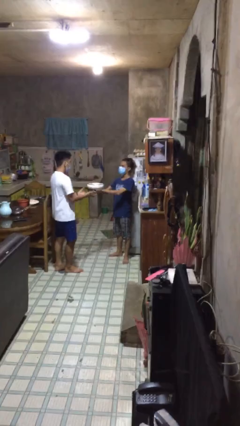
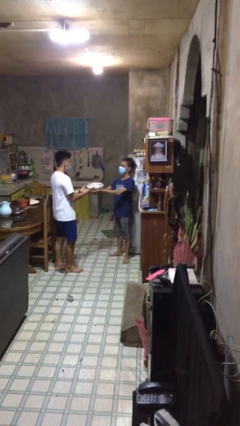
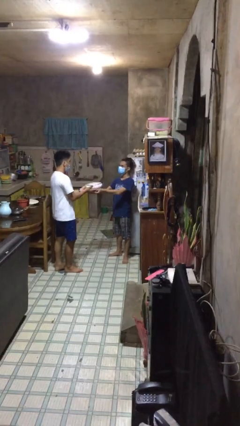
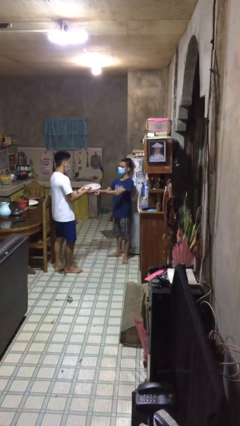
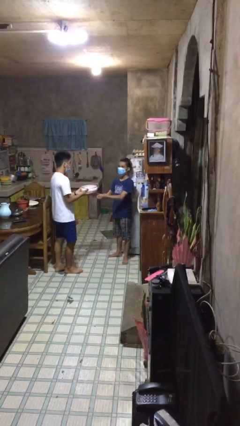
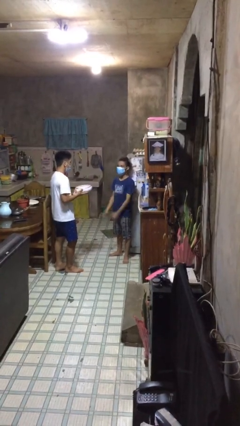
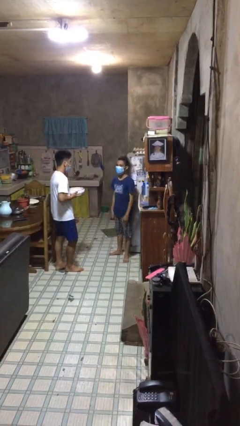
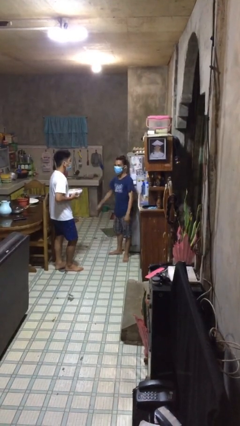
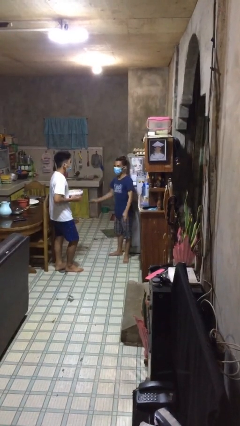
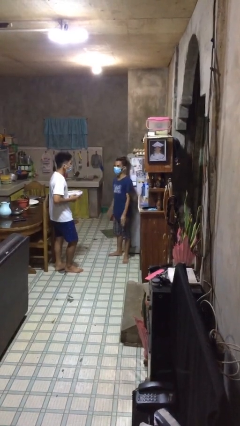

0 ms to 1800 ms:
person transfers object to person

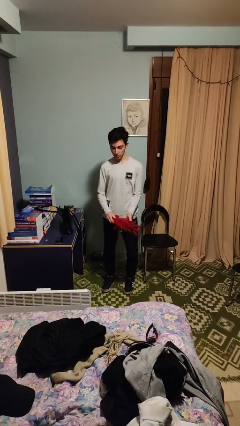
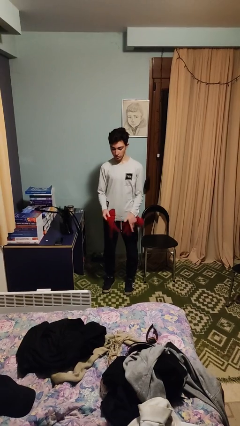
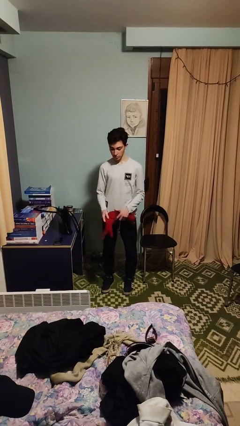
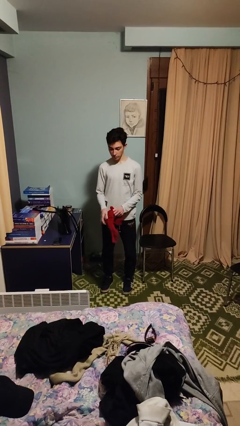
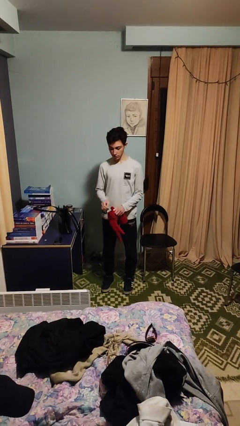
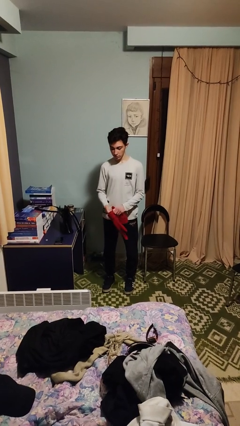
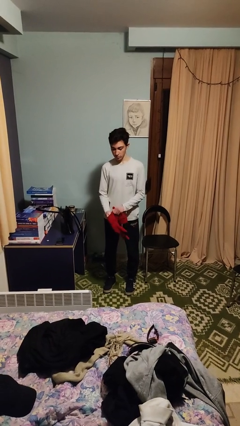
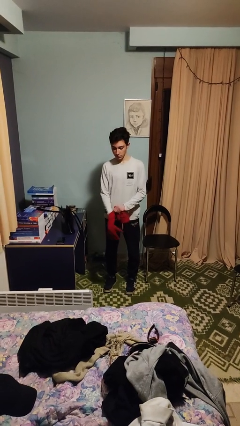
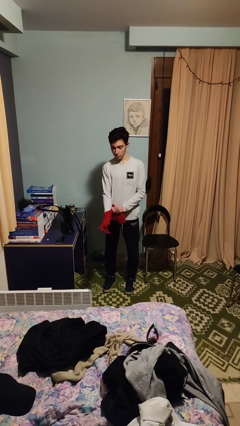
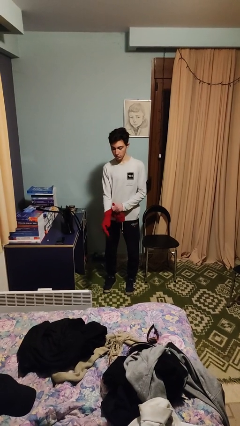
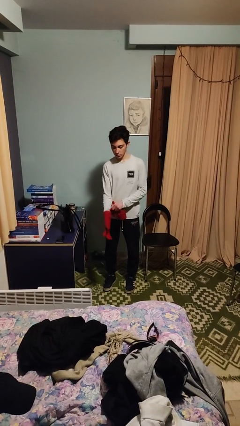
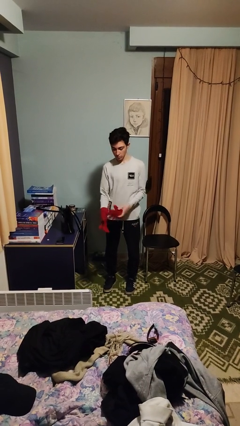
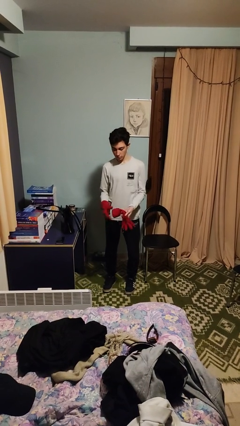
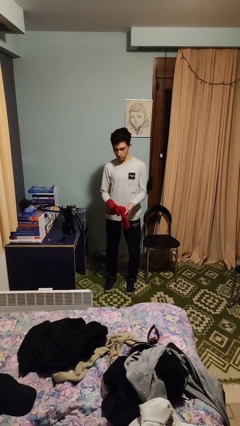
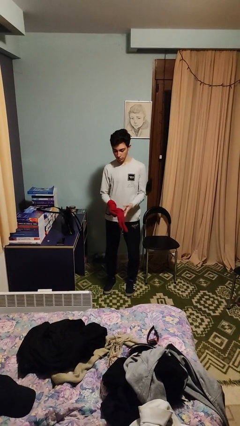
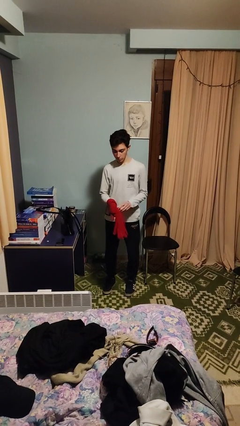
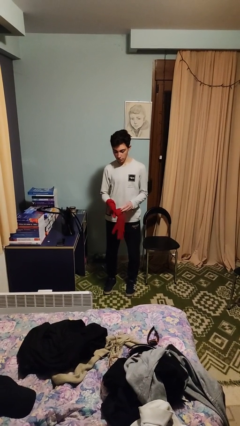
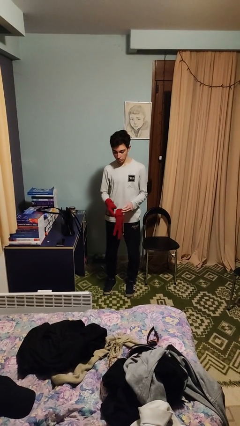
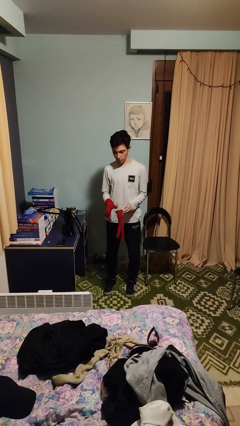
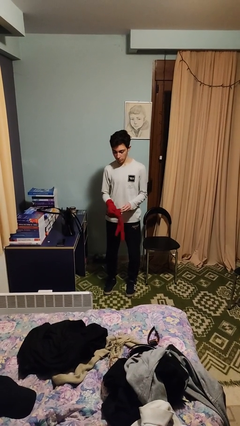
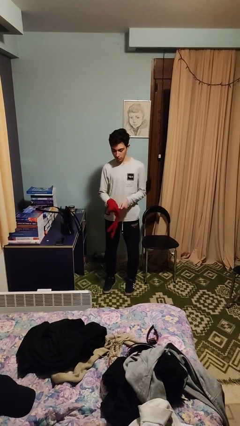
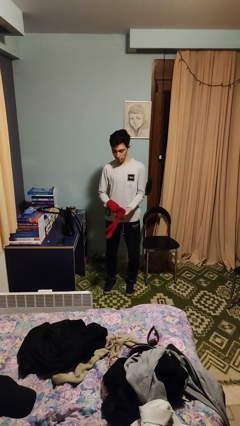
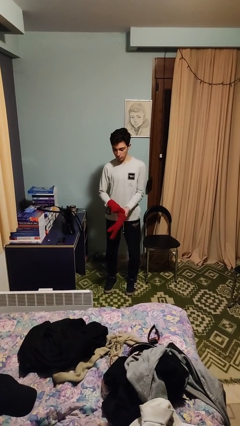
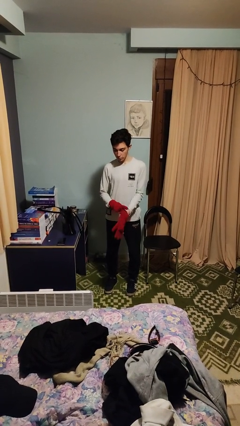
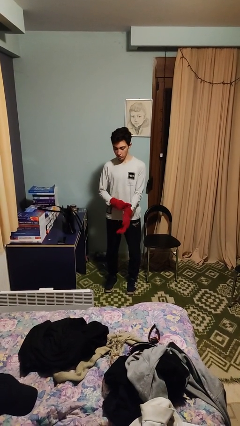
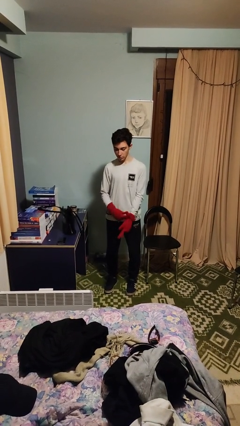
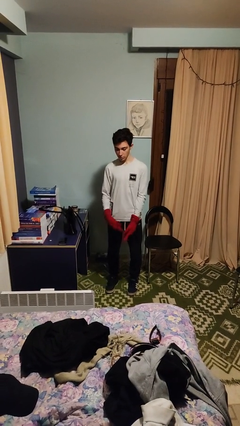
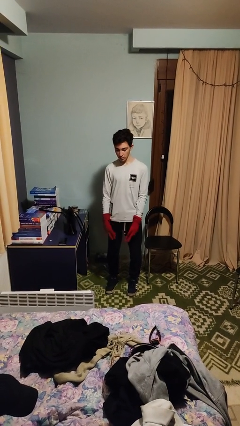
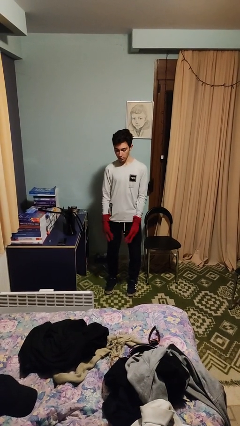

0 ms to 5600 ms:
person puts on gloves

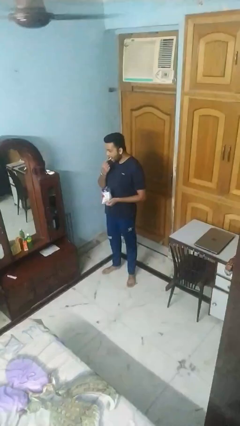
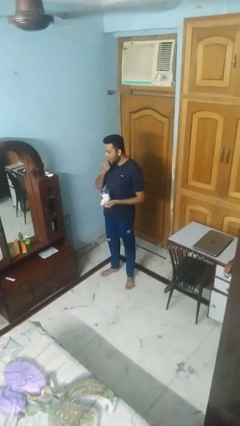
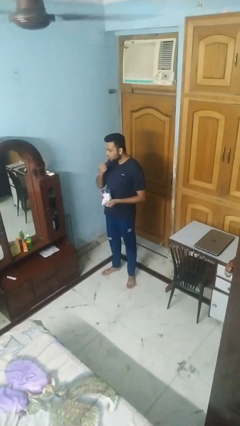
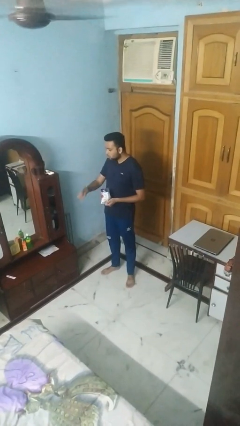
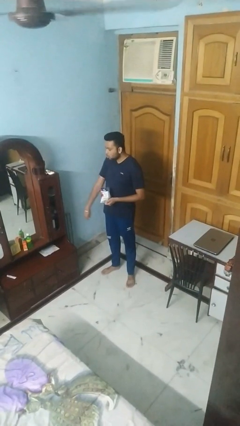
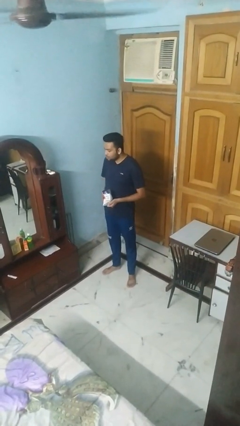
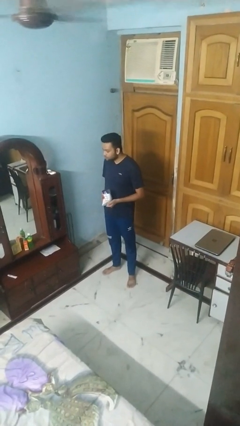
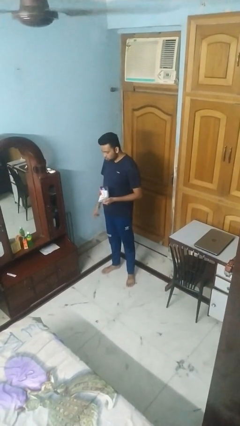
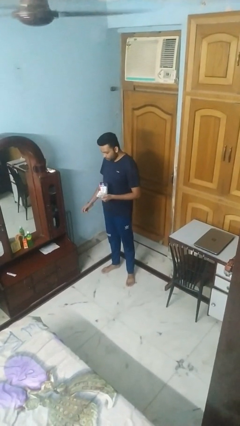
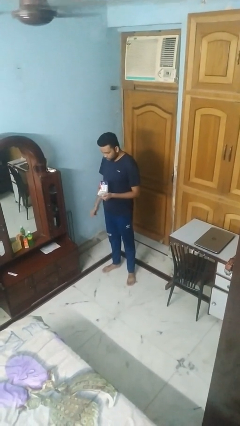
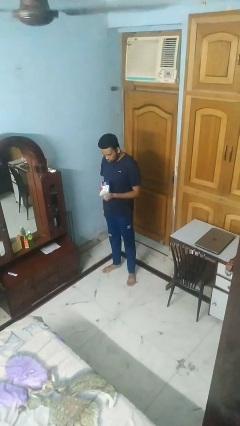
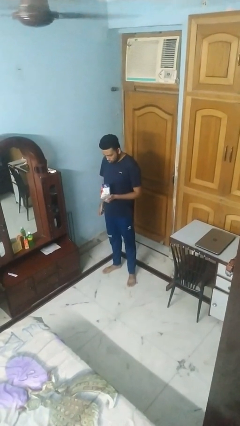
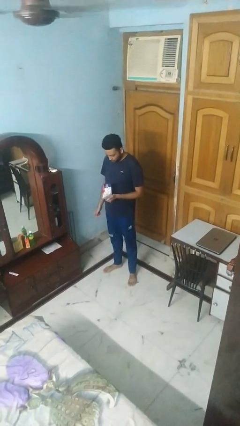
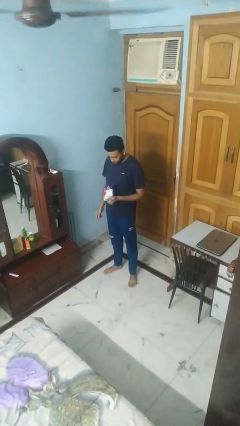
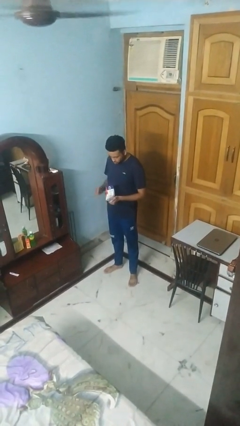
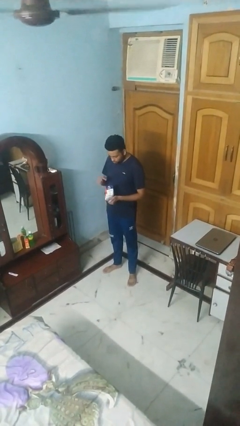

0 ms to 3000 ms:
person eats snack from bag

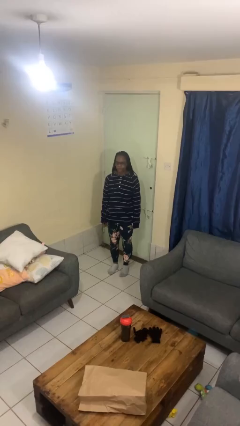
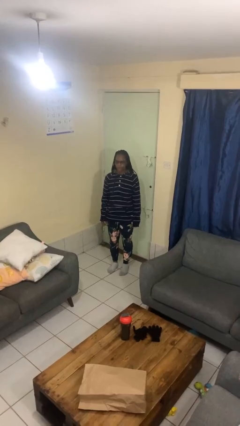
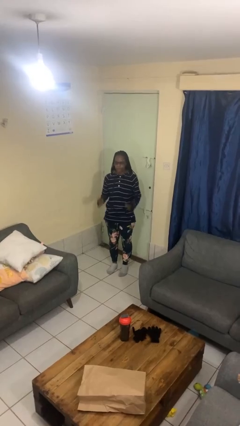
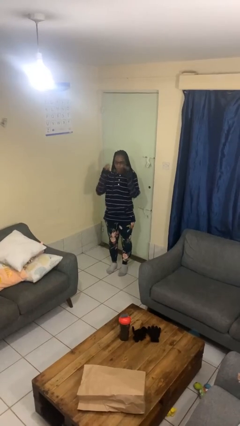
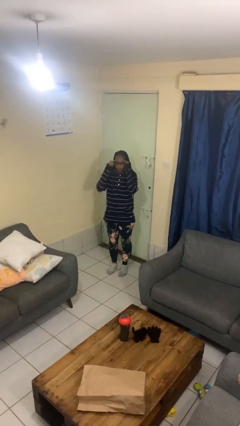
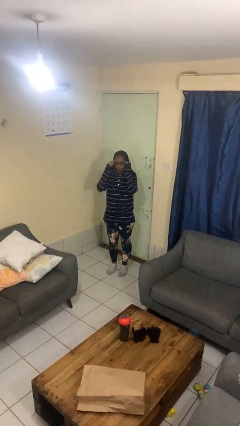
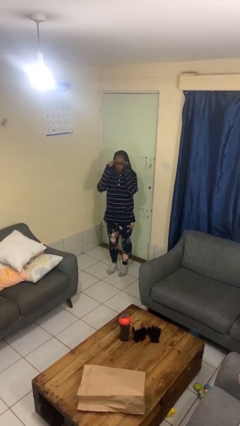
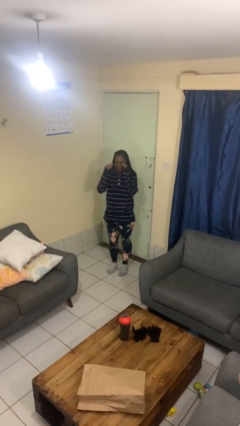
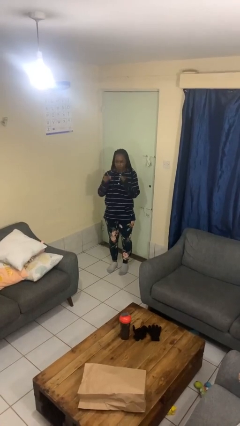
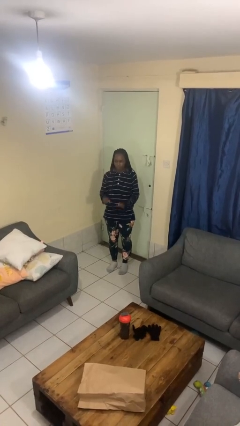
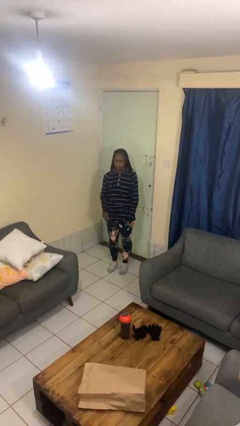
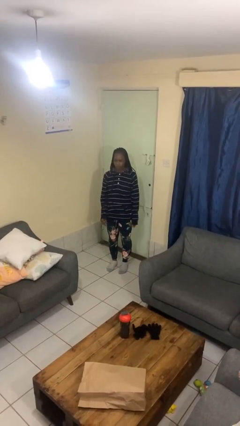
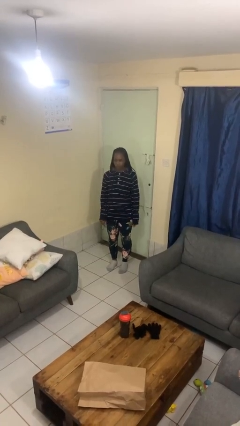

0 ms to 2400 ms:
person takes off glasses

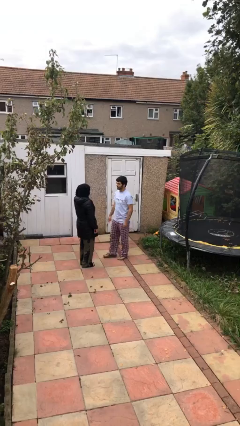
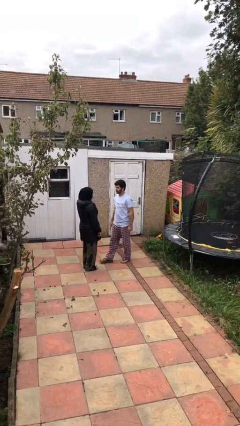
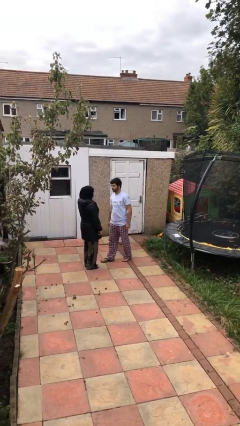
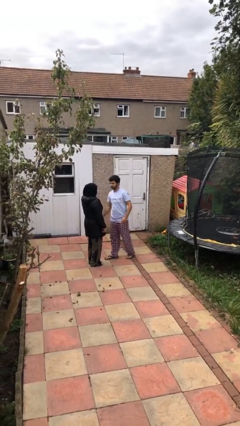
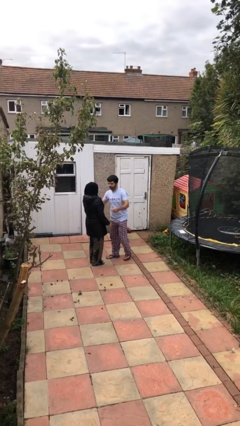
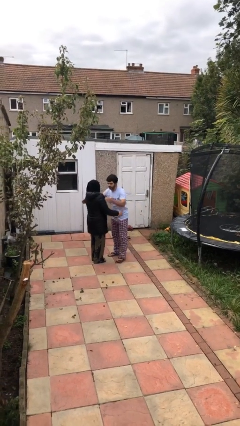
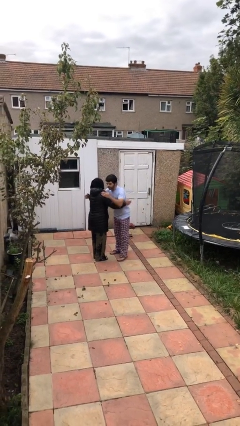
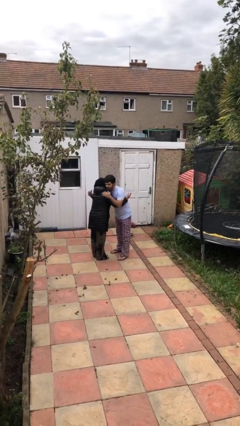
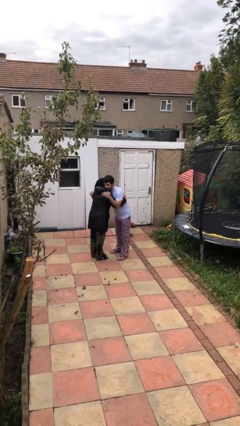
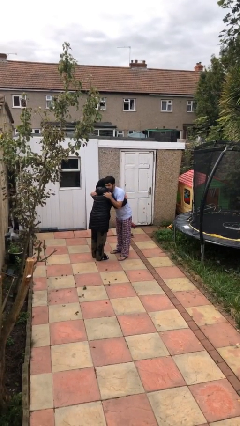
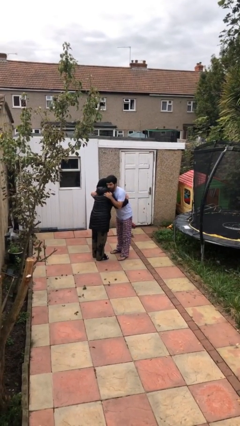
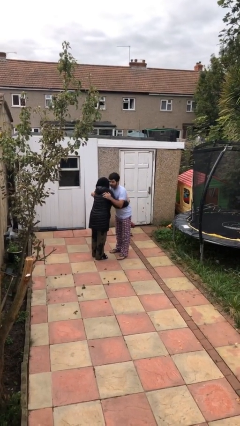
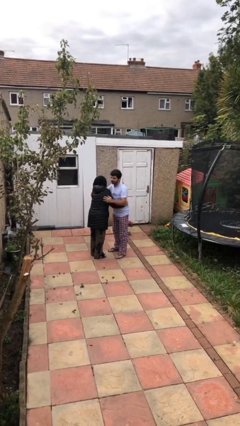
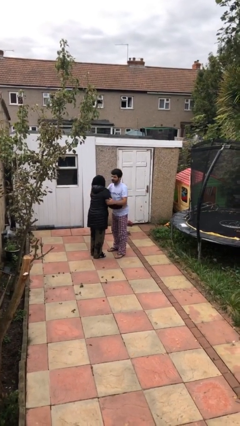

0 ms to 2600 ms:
person embraces person

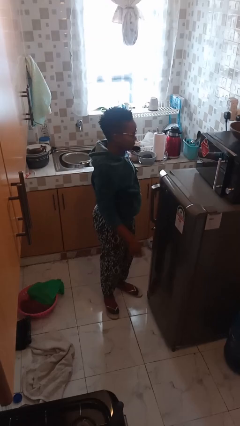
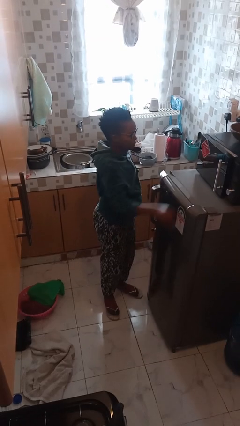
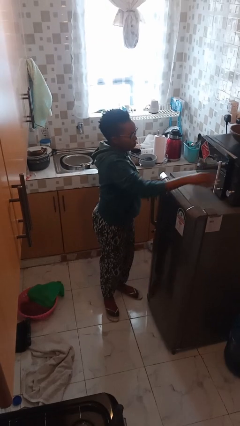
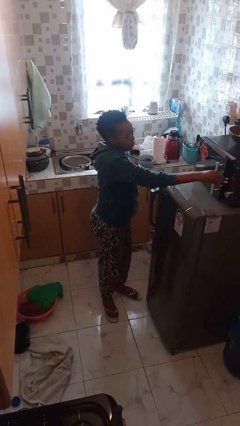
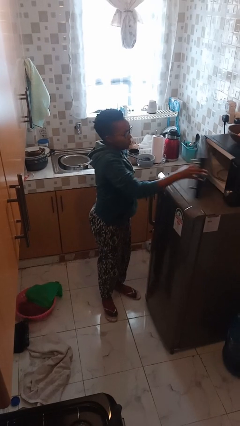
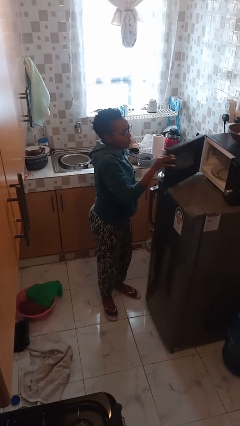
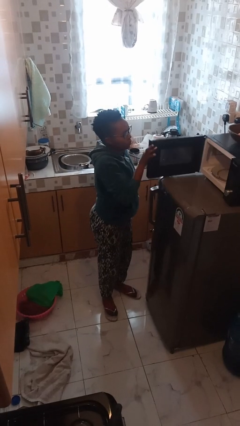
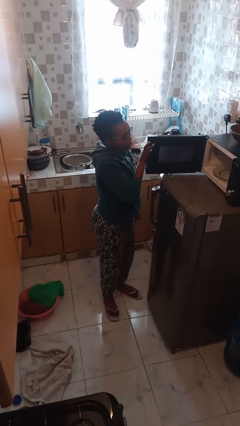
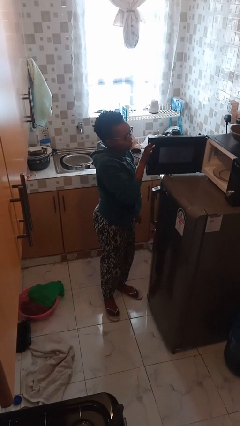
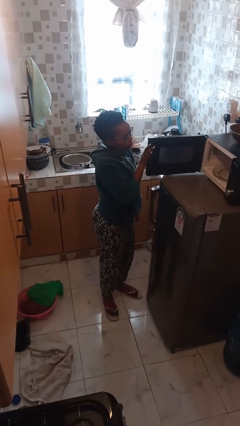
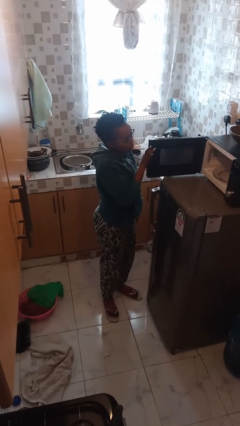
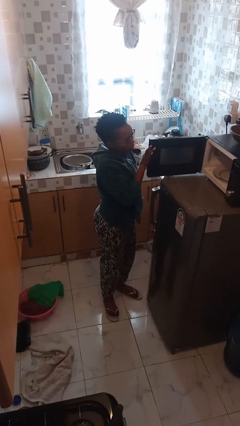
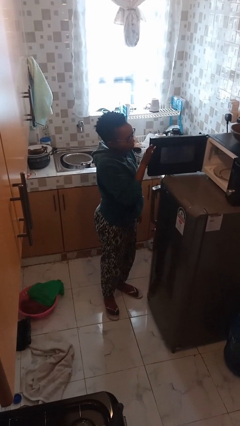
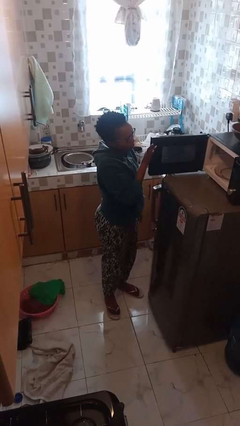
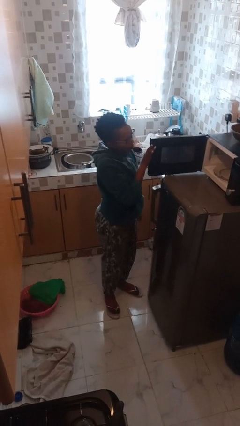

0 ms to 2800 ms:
person opens microwave
